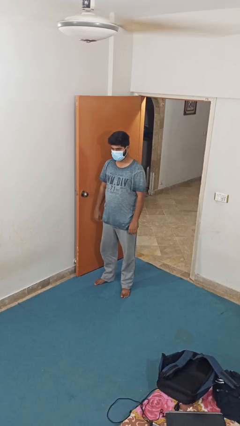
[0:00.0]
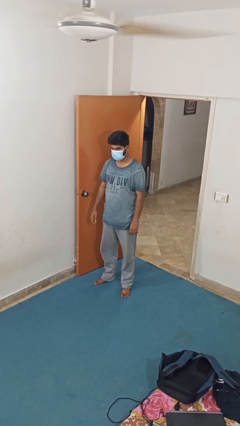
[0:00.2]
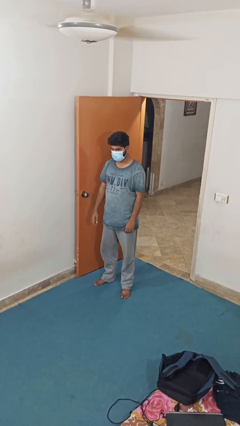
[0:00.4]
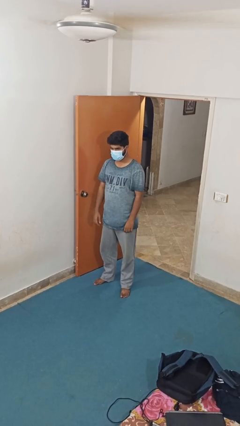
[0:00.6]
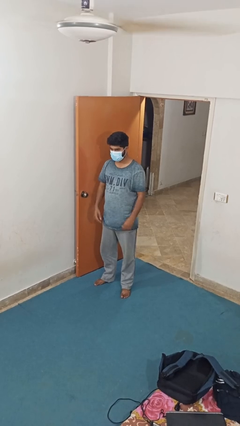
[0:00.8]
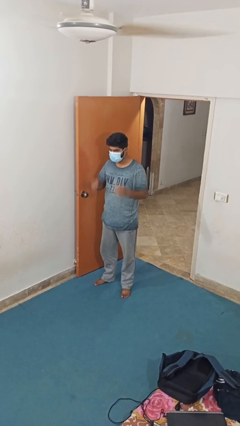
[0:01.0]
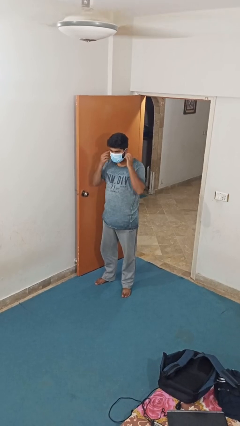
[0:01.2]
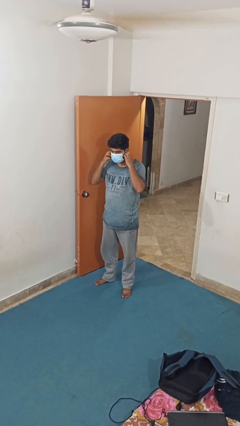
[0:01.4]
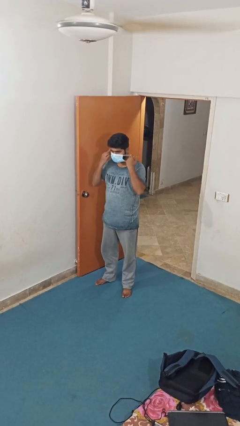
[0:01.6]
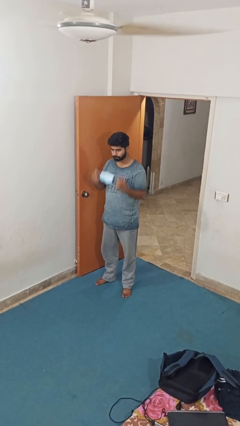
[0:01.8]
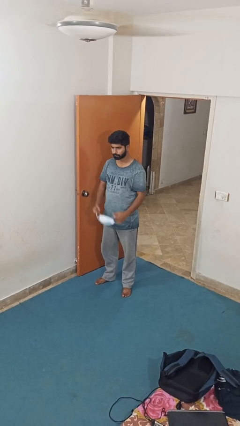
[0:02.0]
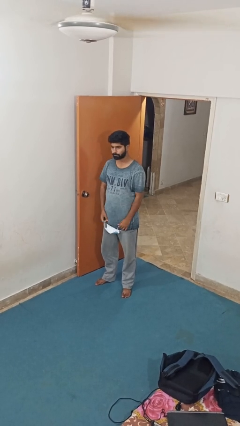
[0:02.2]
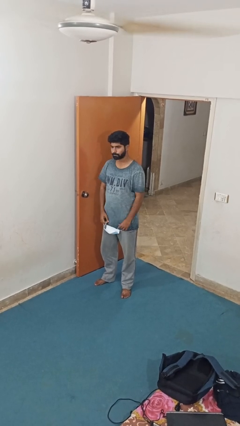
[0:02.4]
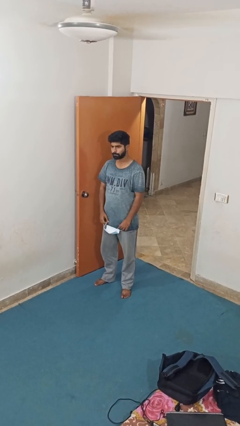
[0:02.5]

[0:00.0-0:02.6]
person takes off facemask

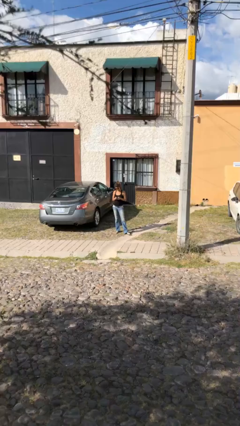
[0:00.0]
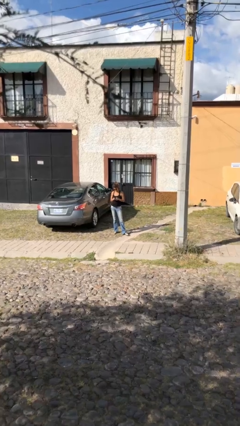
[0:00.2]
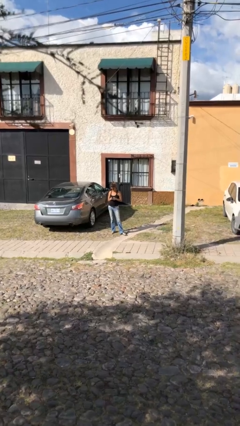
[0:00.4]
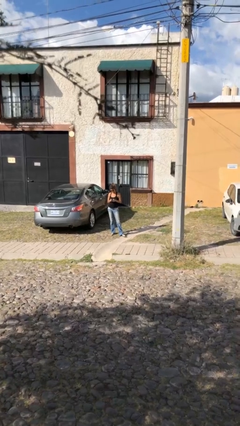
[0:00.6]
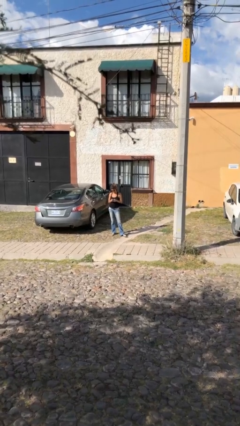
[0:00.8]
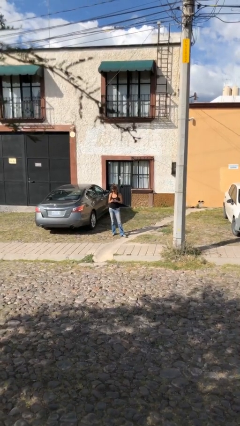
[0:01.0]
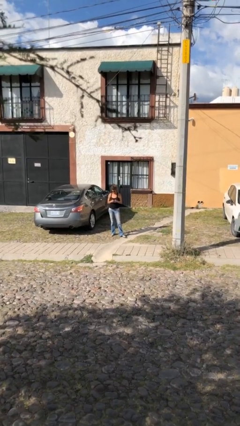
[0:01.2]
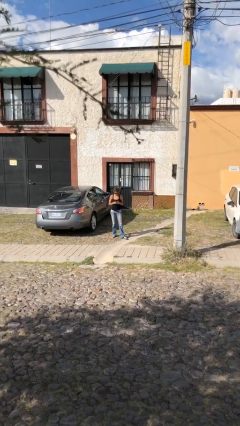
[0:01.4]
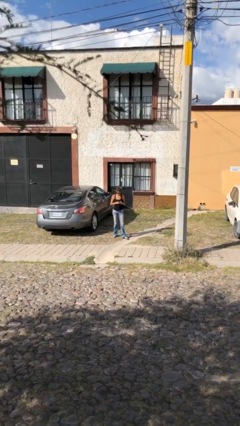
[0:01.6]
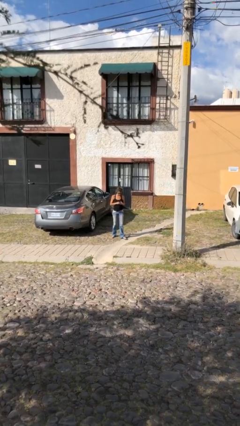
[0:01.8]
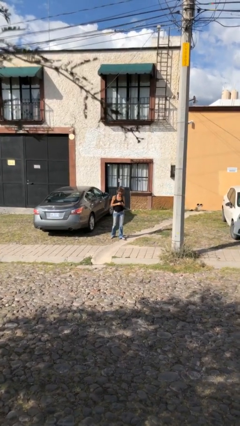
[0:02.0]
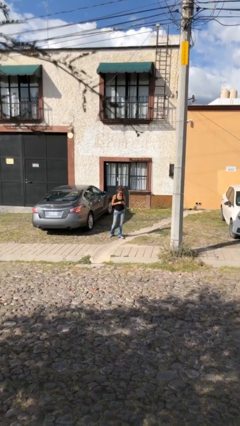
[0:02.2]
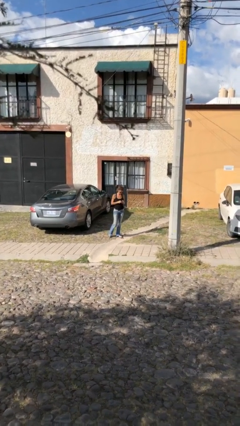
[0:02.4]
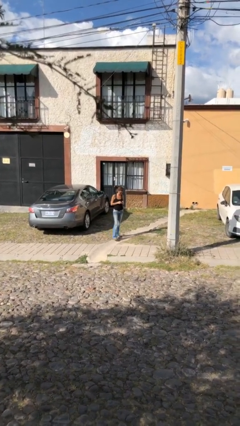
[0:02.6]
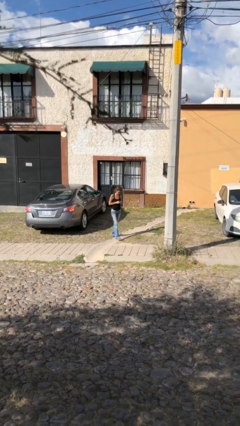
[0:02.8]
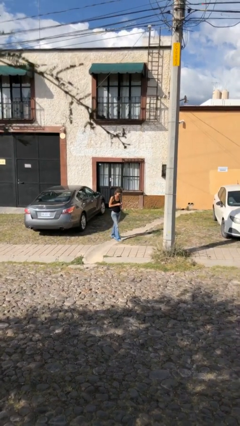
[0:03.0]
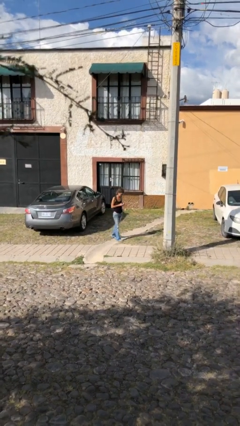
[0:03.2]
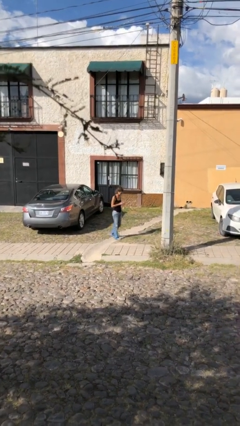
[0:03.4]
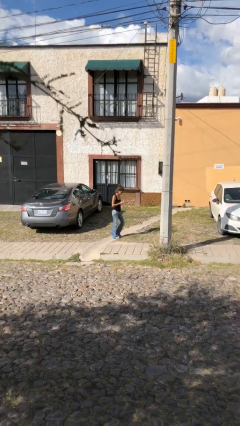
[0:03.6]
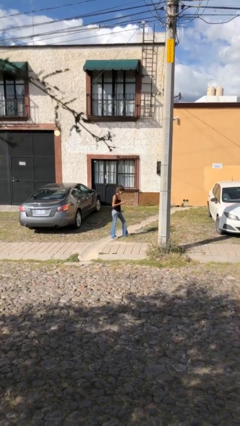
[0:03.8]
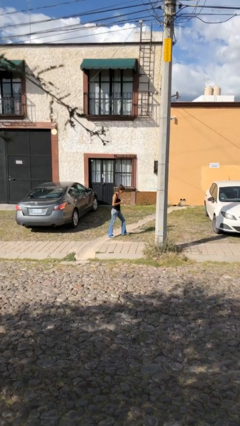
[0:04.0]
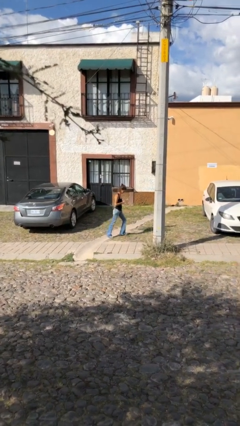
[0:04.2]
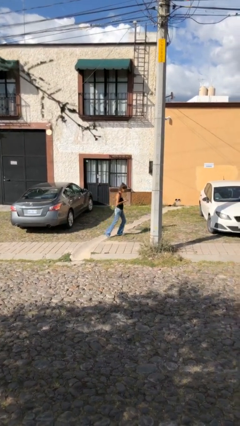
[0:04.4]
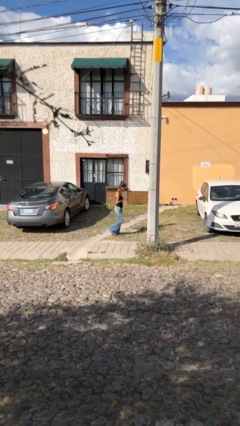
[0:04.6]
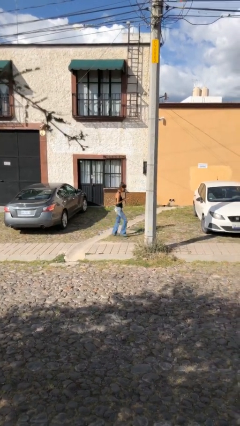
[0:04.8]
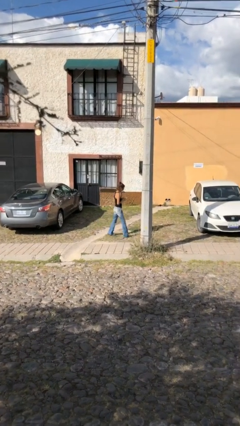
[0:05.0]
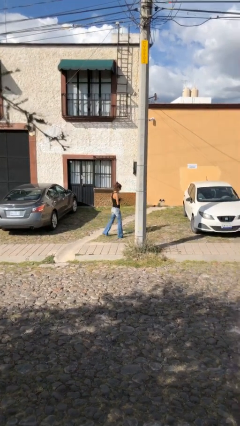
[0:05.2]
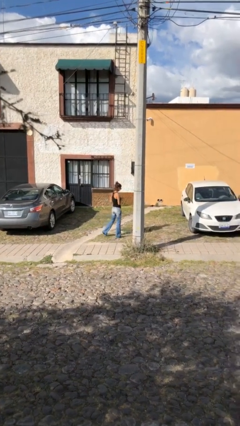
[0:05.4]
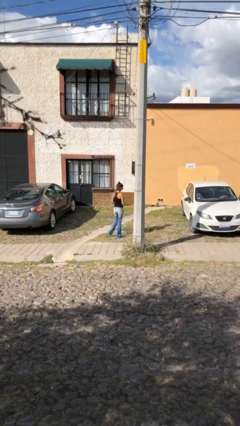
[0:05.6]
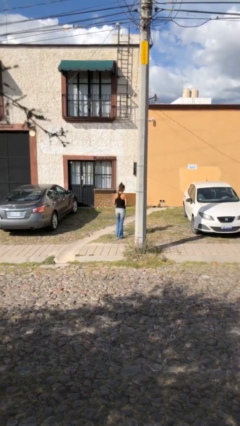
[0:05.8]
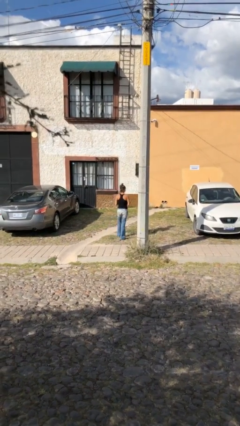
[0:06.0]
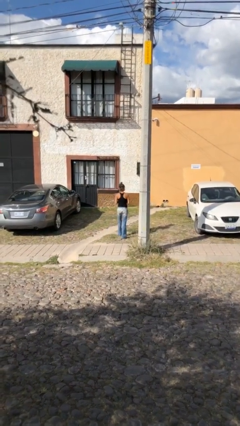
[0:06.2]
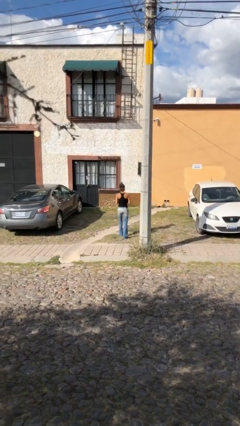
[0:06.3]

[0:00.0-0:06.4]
person texts on phone

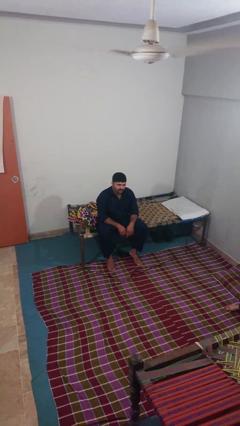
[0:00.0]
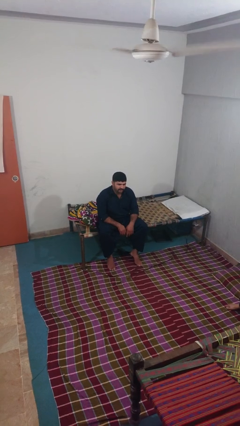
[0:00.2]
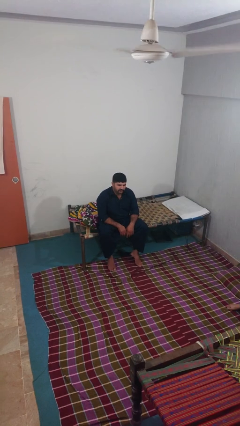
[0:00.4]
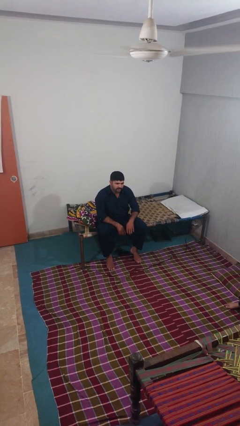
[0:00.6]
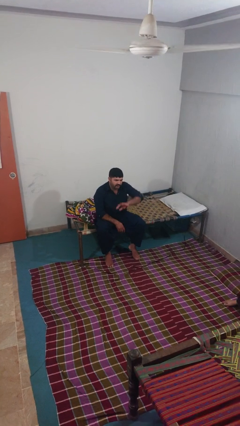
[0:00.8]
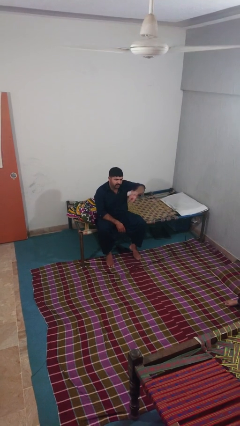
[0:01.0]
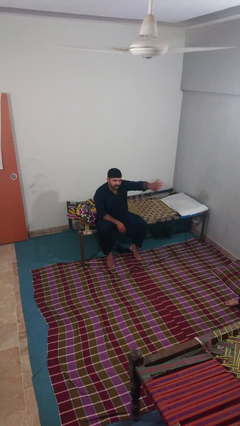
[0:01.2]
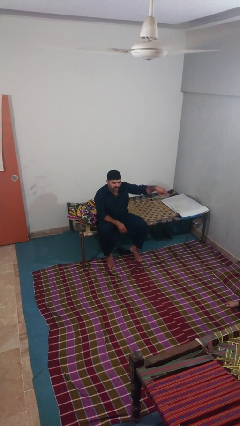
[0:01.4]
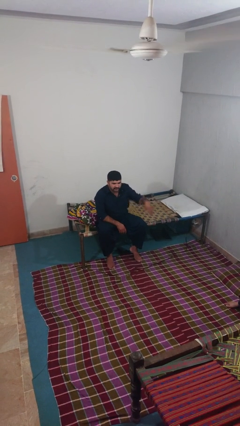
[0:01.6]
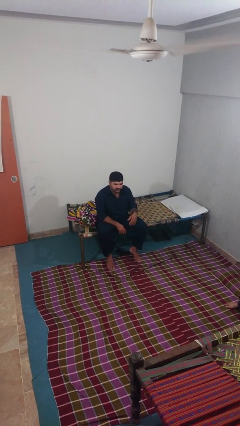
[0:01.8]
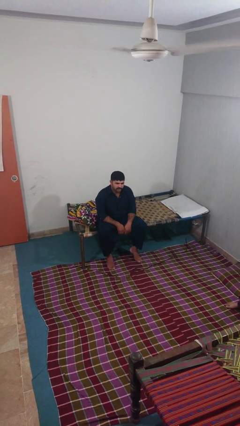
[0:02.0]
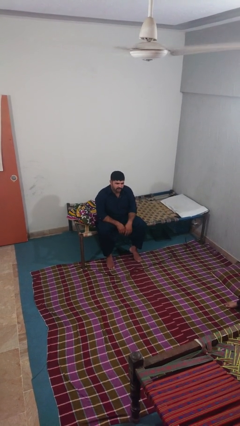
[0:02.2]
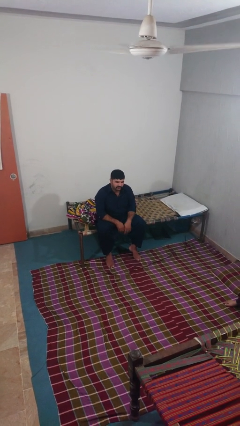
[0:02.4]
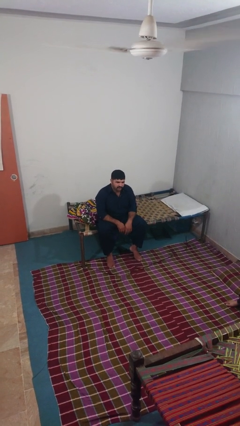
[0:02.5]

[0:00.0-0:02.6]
person gestures swipe left

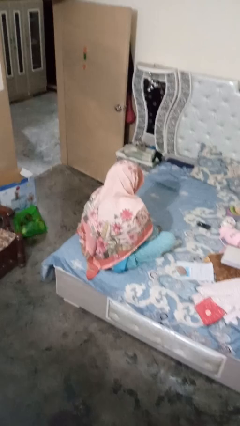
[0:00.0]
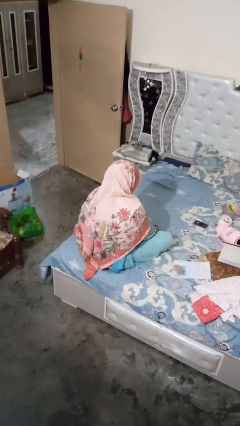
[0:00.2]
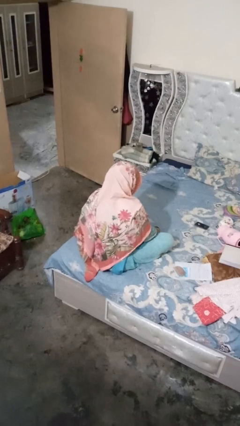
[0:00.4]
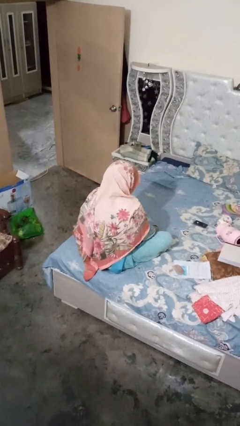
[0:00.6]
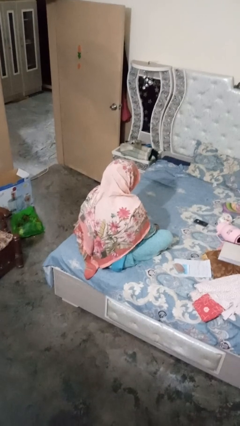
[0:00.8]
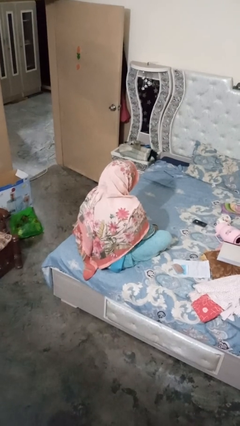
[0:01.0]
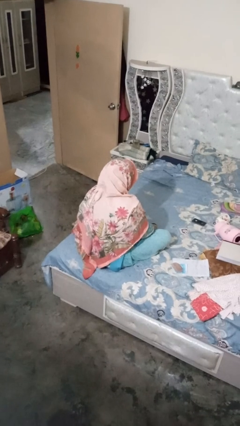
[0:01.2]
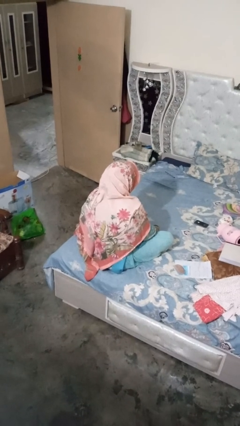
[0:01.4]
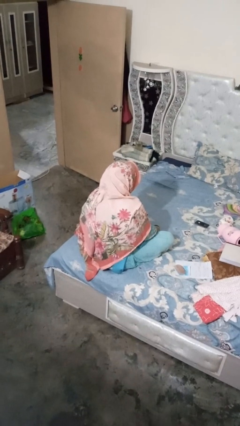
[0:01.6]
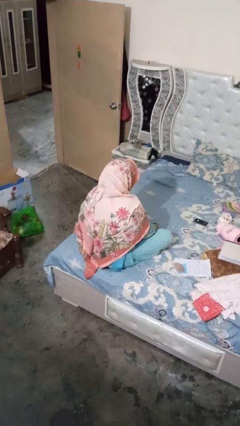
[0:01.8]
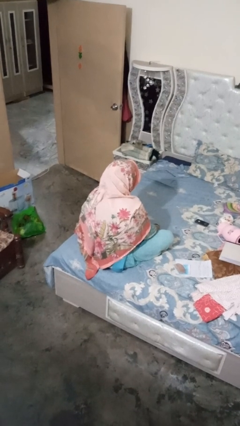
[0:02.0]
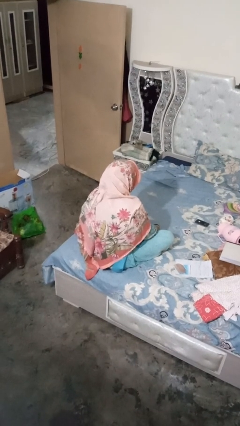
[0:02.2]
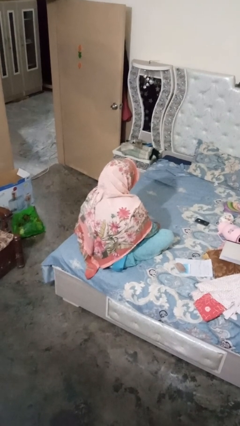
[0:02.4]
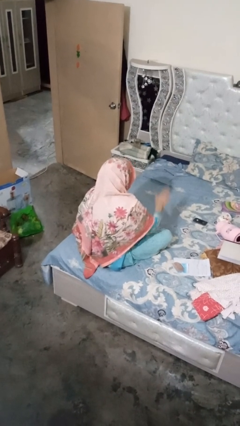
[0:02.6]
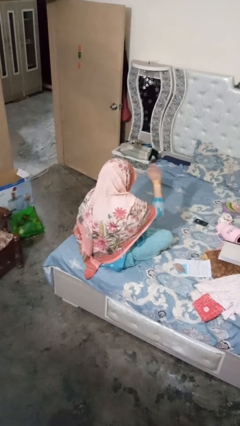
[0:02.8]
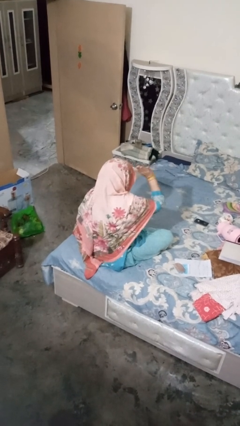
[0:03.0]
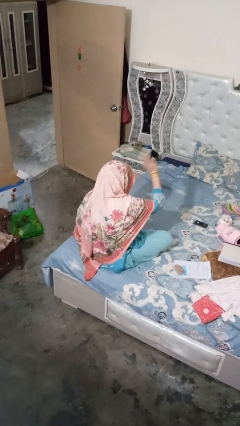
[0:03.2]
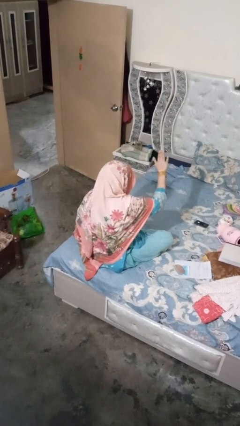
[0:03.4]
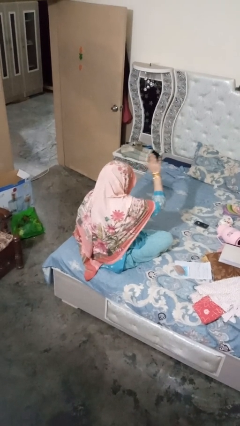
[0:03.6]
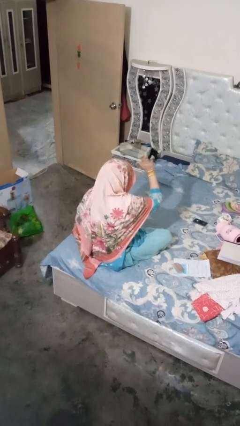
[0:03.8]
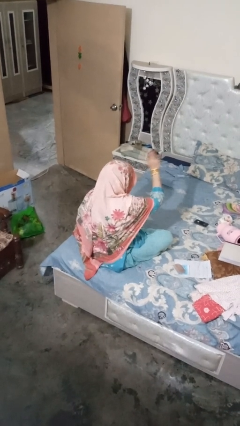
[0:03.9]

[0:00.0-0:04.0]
person gestures stop

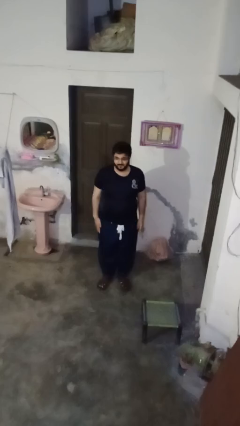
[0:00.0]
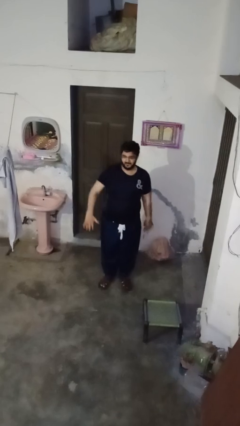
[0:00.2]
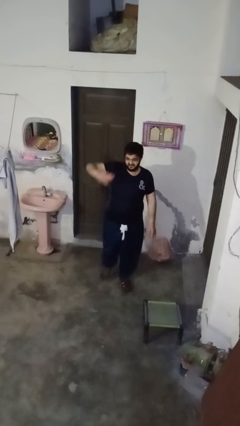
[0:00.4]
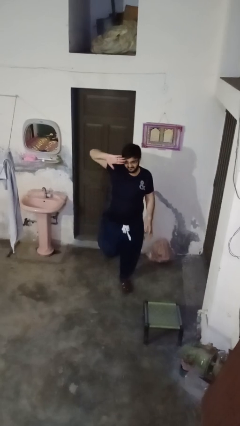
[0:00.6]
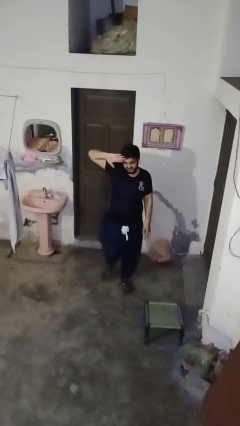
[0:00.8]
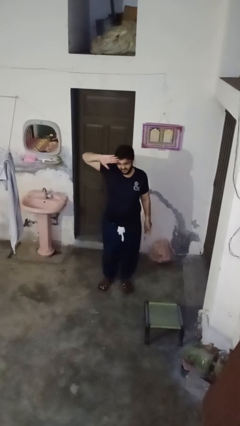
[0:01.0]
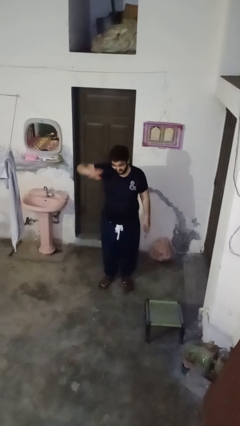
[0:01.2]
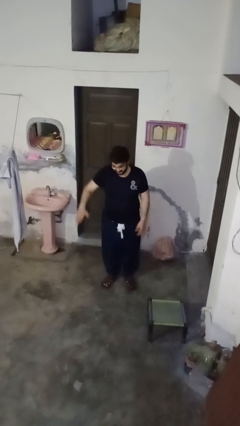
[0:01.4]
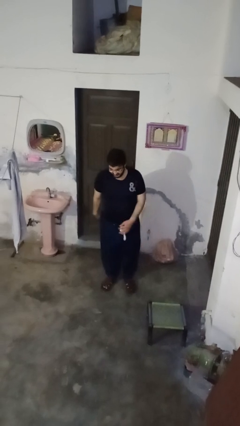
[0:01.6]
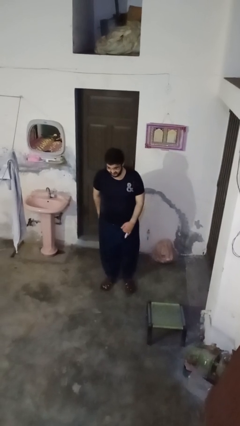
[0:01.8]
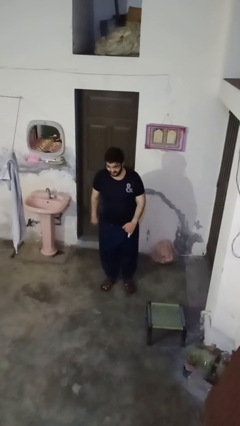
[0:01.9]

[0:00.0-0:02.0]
person salutes
